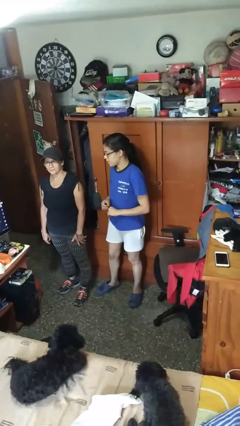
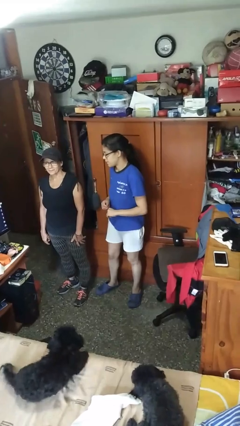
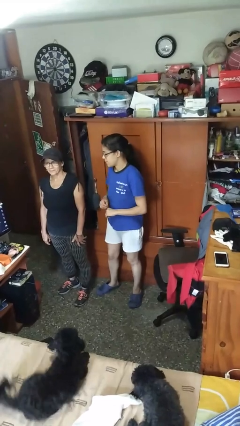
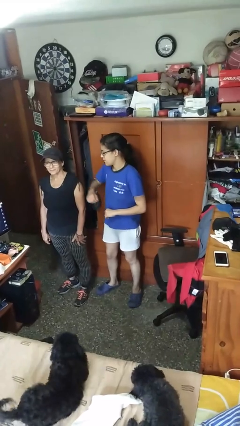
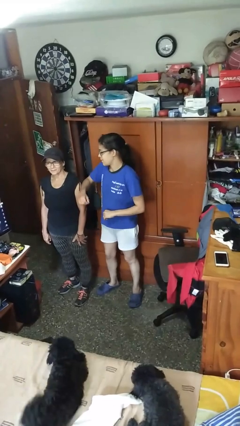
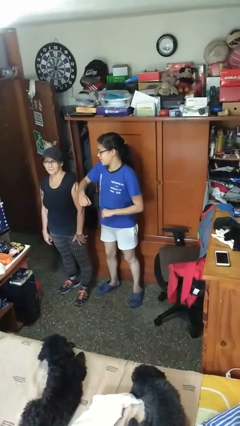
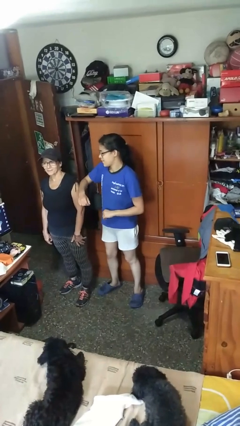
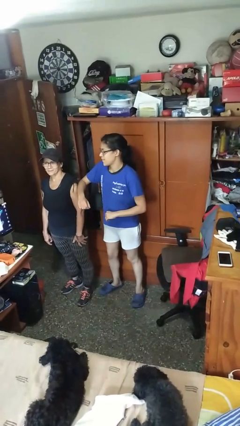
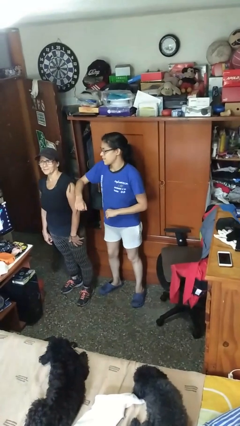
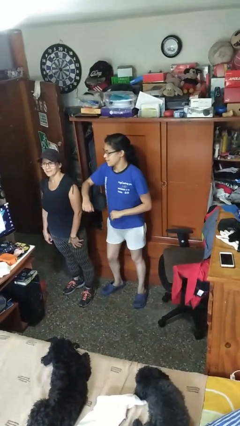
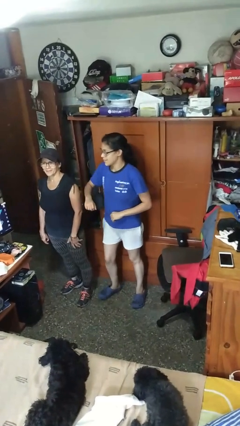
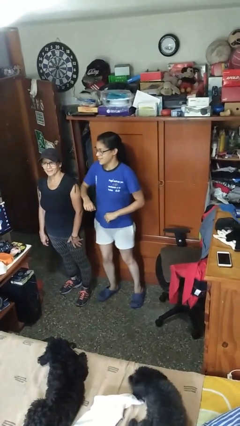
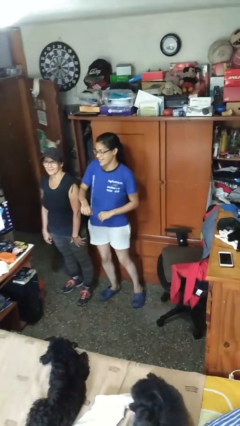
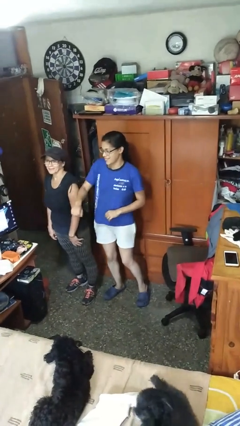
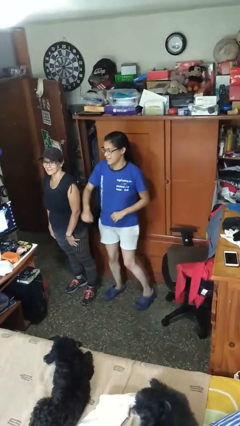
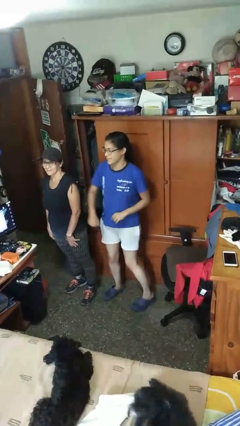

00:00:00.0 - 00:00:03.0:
person nudges person with elbow

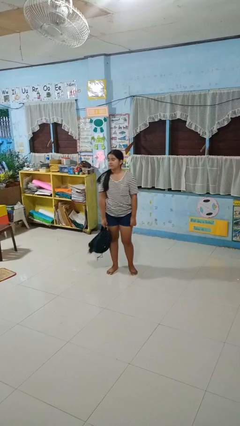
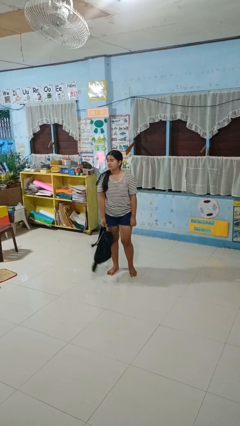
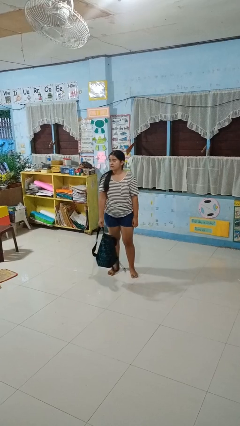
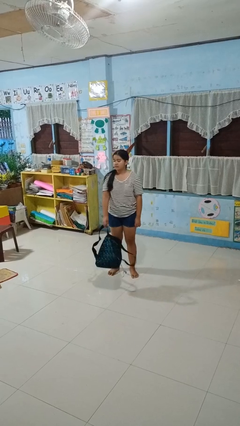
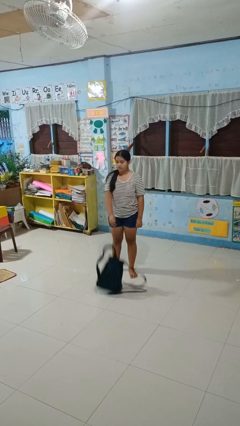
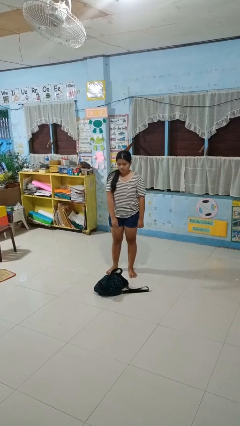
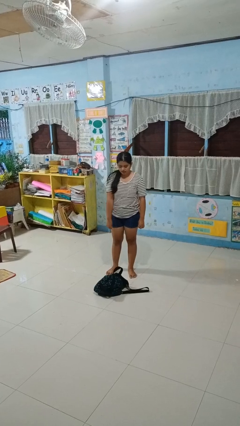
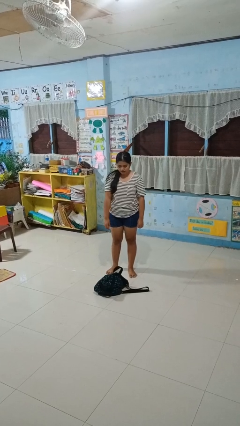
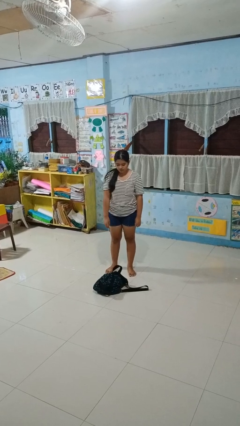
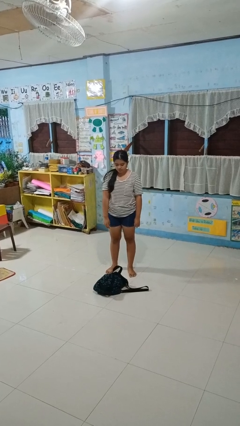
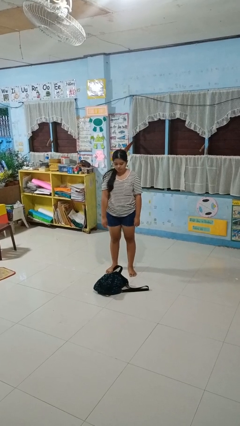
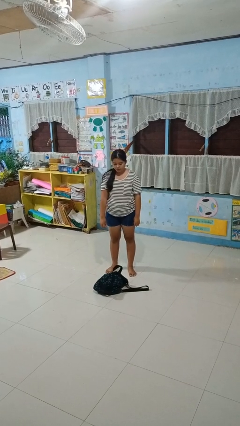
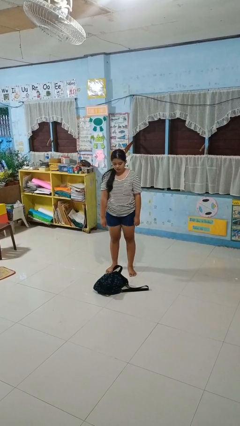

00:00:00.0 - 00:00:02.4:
person drops object

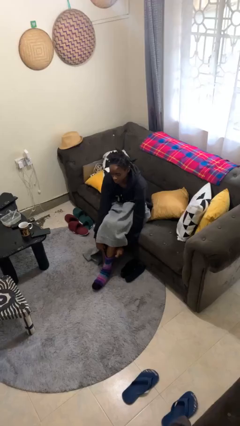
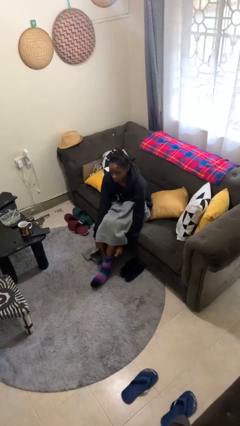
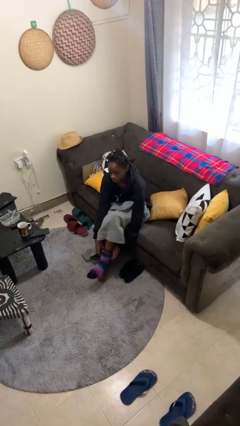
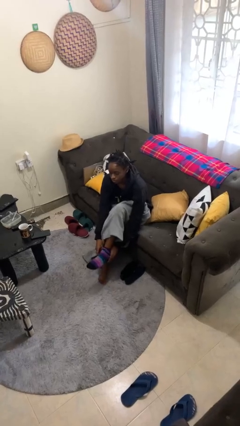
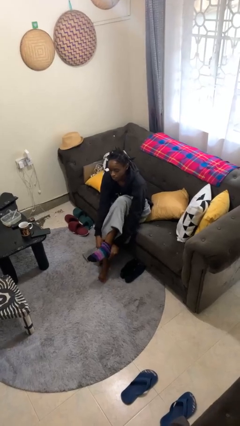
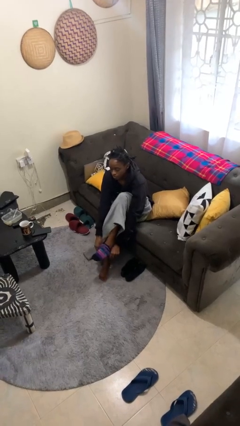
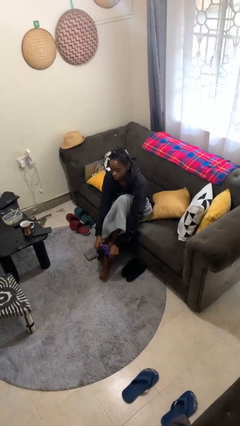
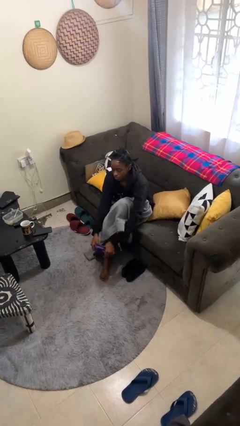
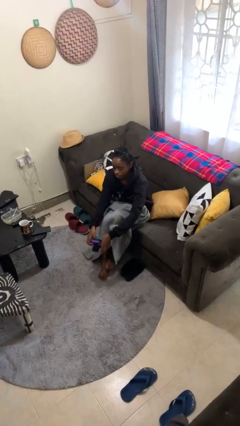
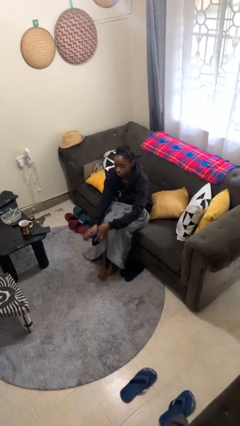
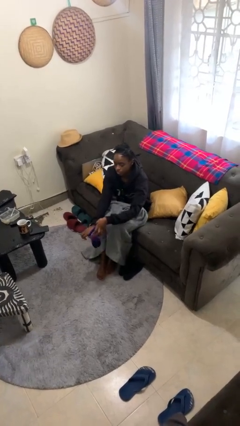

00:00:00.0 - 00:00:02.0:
person takes off socks

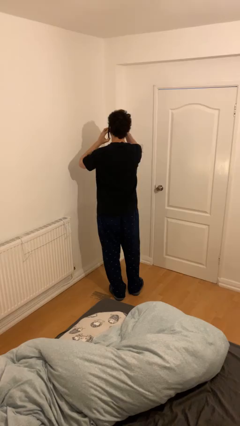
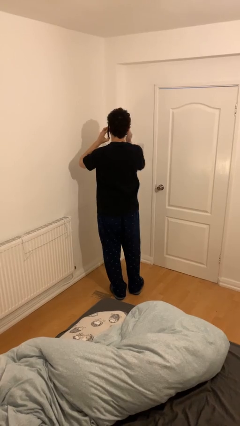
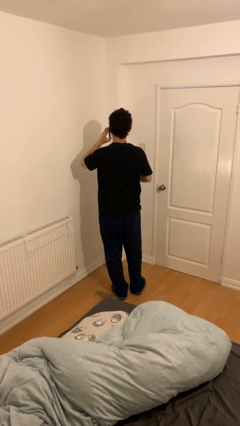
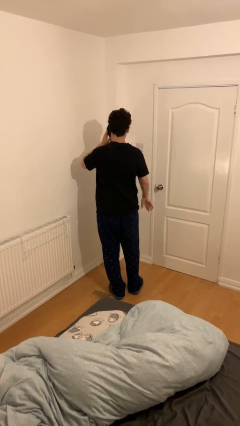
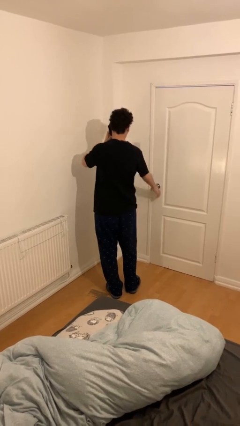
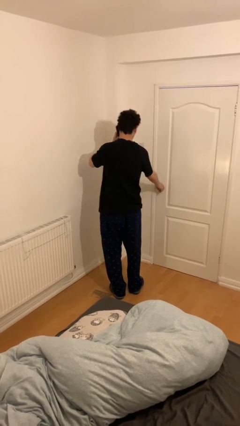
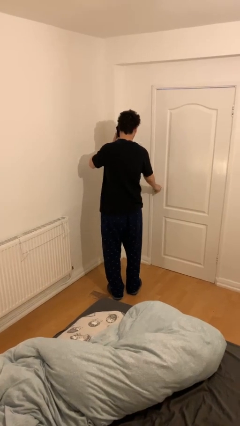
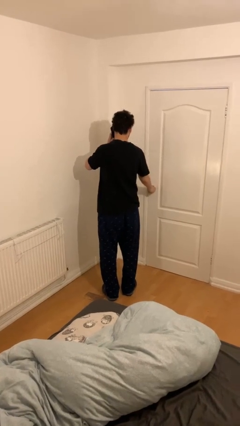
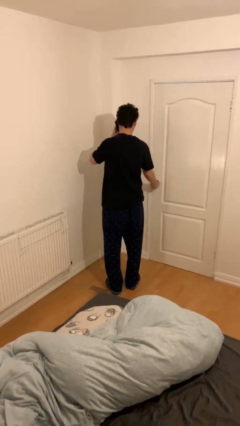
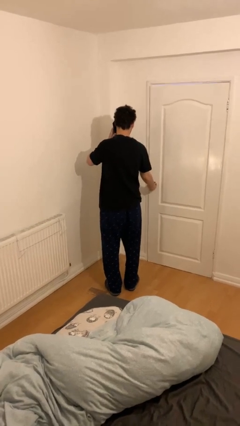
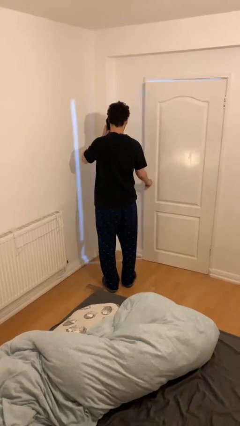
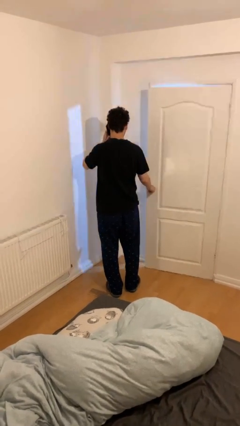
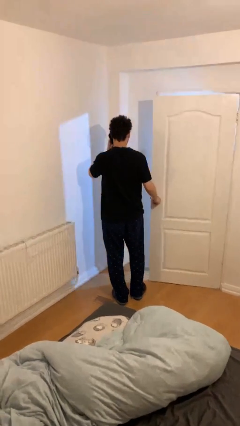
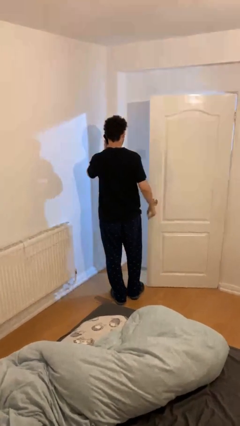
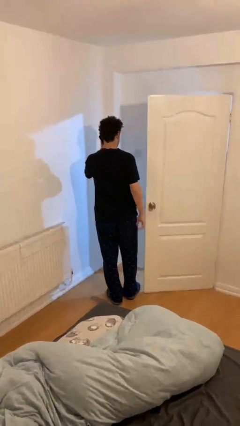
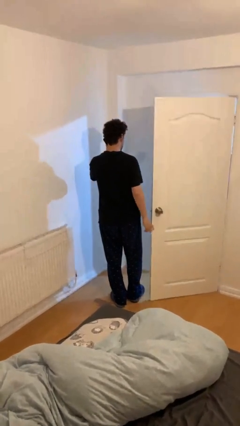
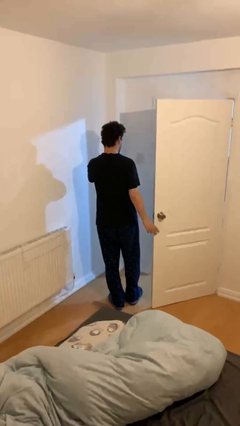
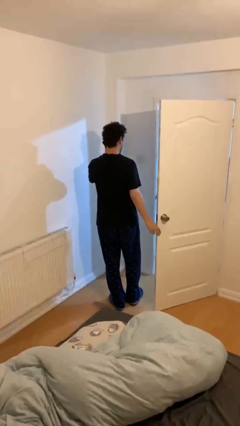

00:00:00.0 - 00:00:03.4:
person opens facility door

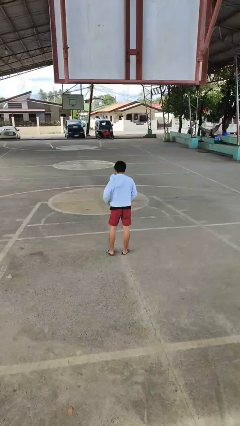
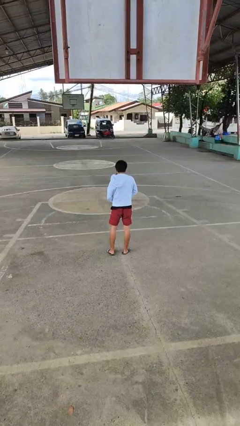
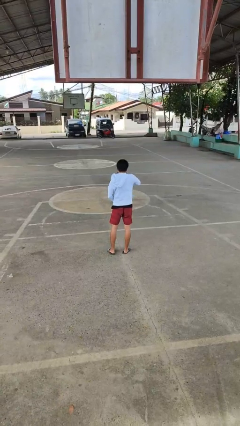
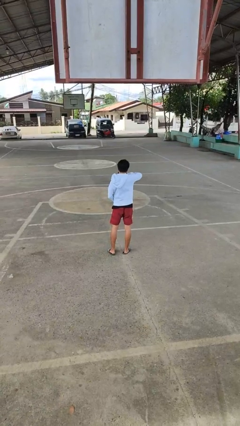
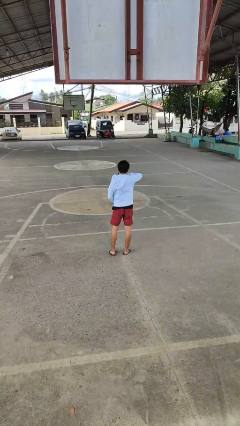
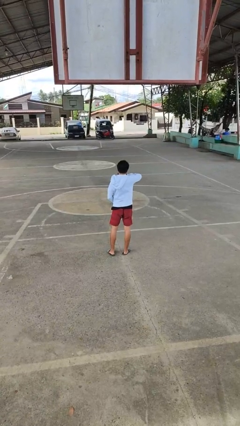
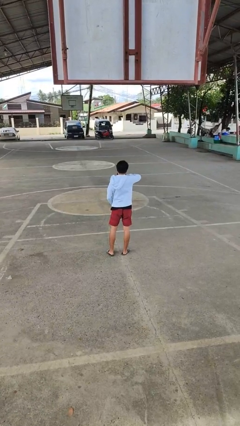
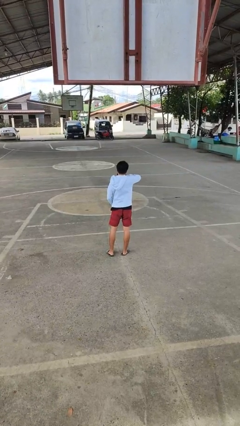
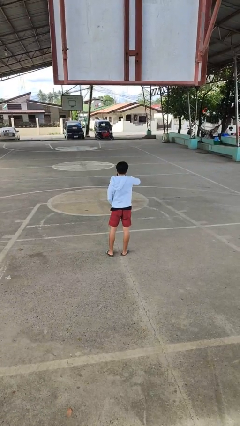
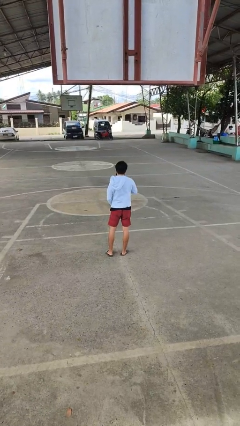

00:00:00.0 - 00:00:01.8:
person zips up jacket

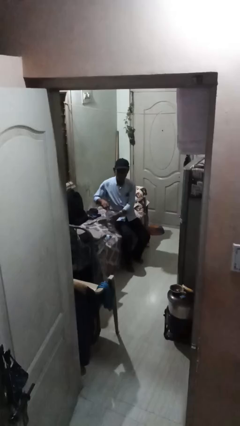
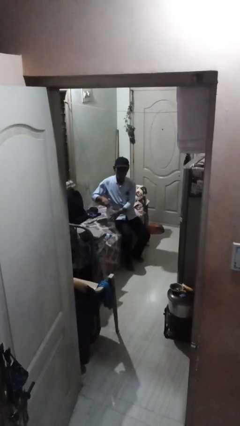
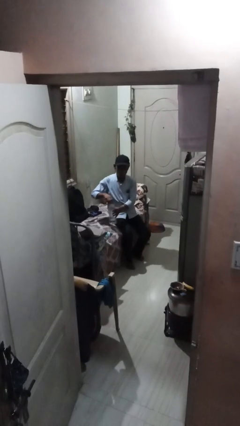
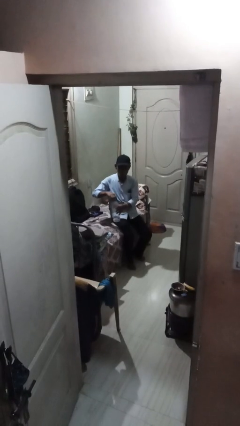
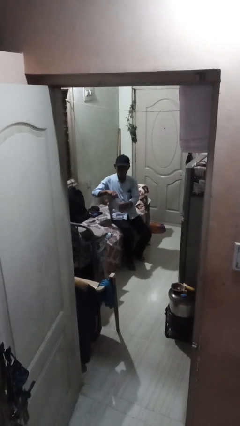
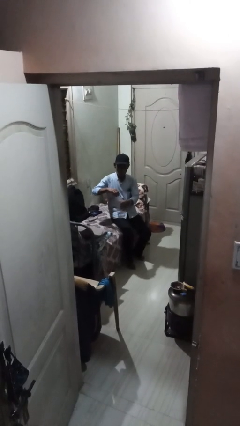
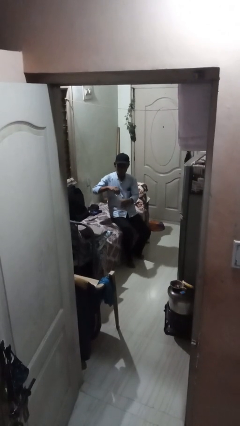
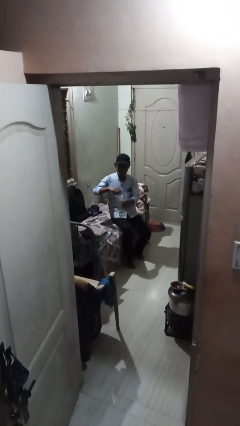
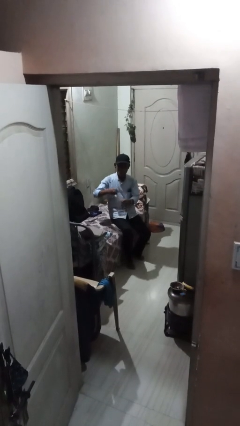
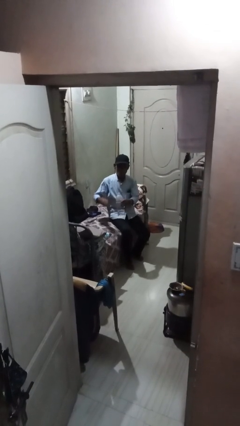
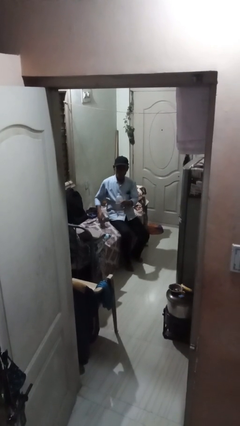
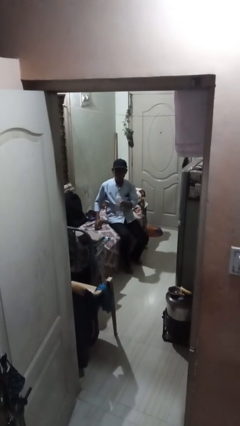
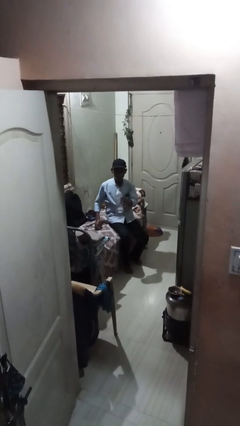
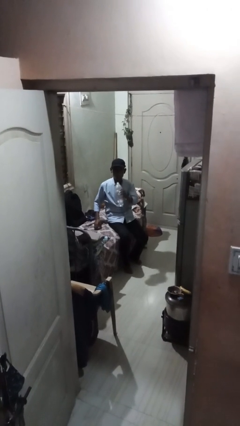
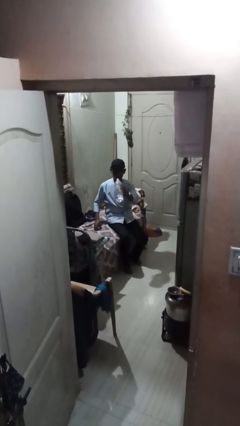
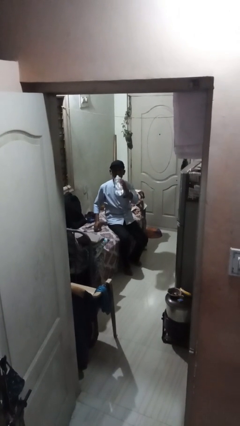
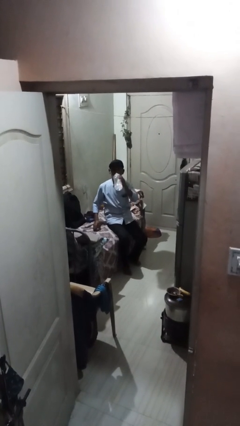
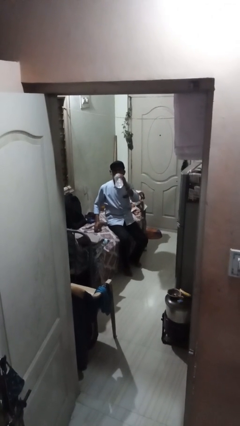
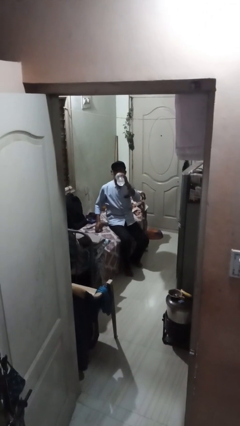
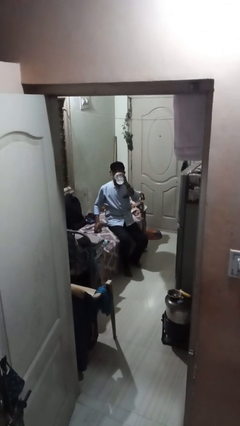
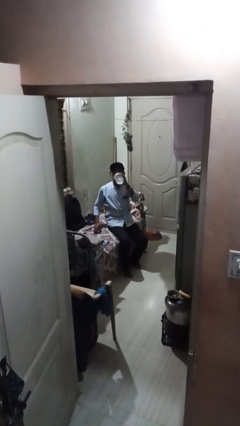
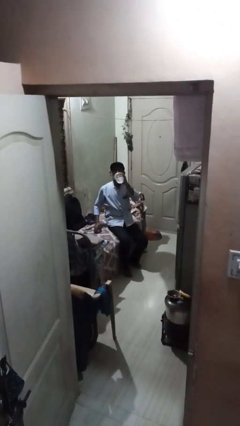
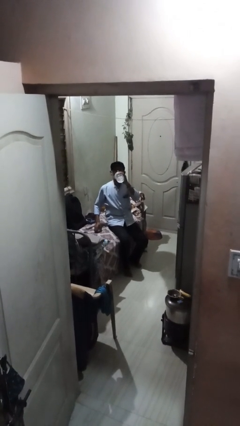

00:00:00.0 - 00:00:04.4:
person drinks from bottle

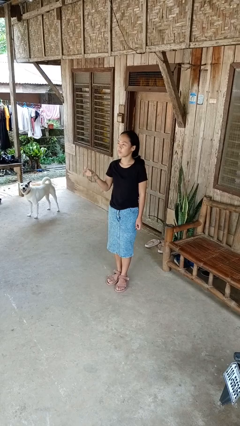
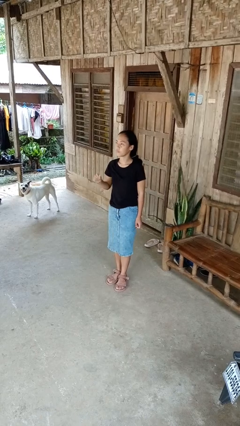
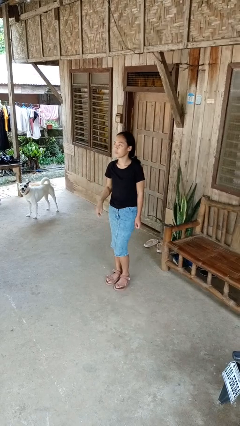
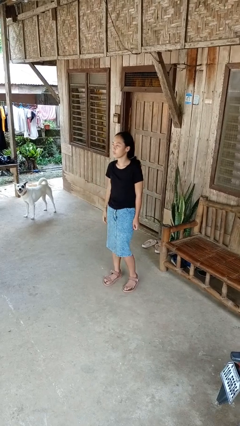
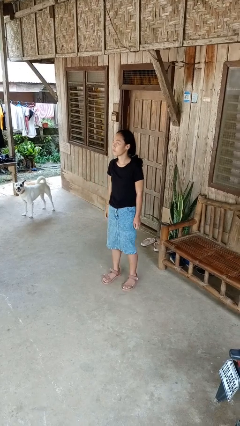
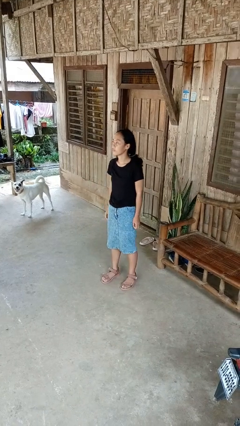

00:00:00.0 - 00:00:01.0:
person snaps fingers
